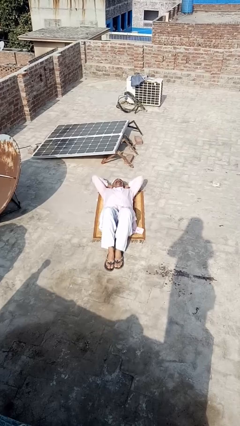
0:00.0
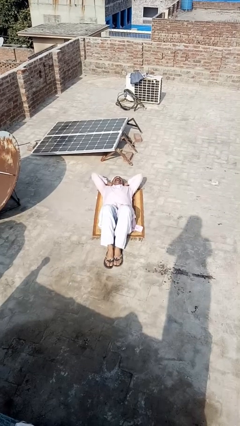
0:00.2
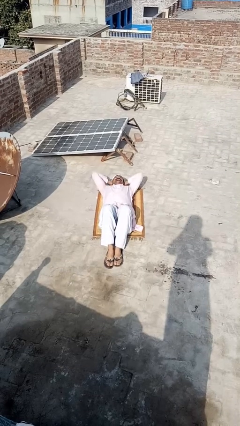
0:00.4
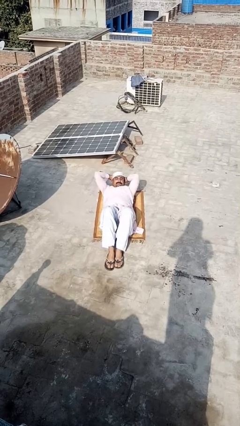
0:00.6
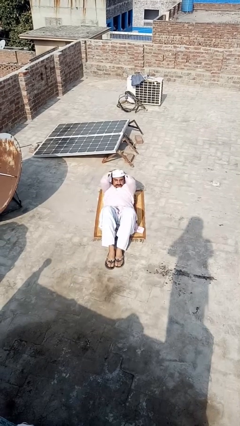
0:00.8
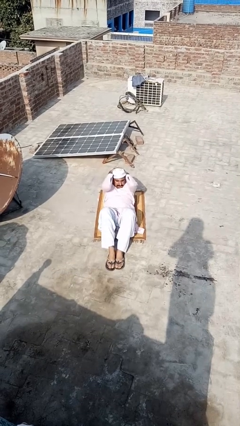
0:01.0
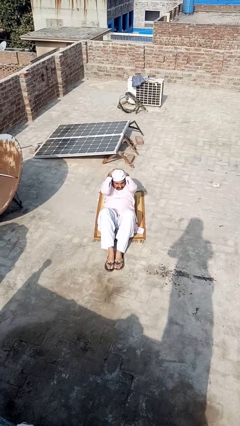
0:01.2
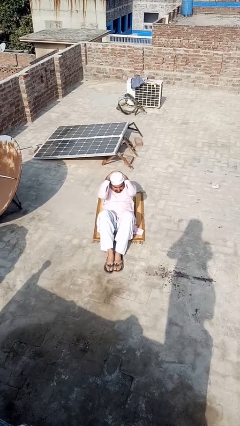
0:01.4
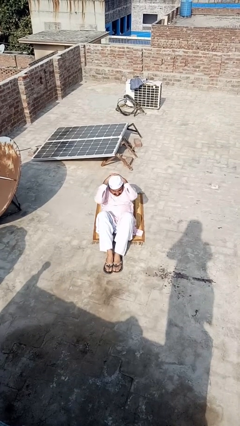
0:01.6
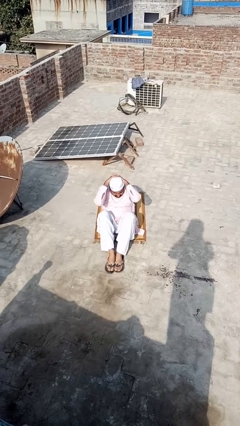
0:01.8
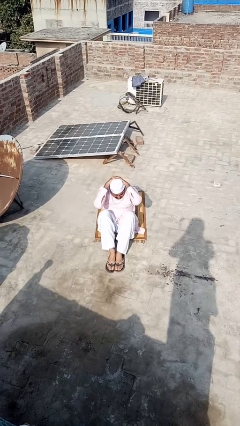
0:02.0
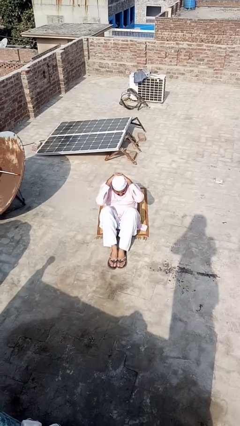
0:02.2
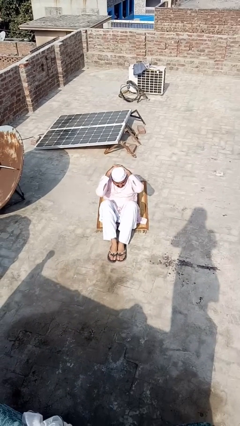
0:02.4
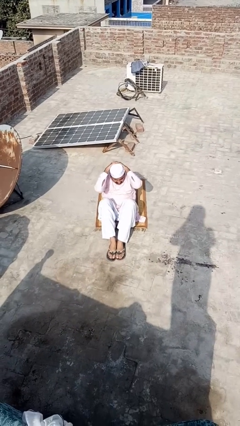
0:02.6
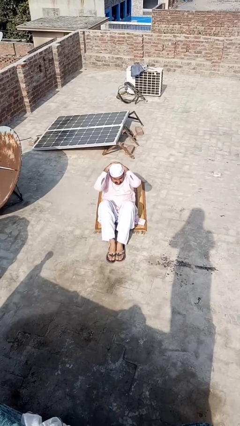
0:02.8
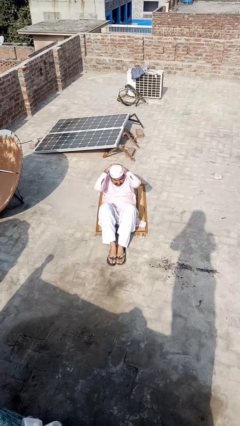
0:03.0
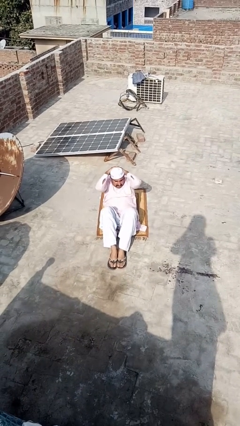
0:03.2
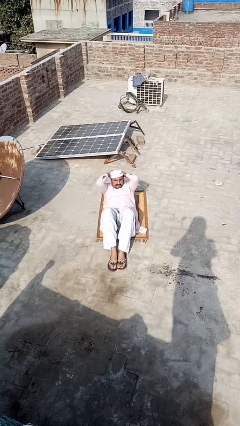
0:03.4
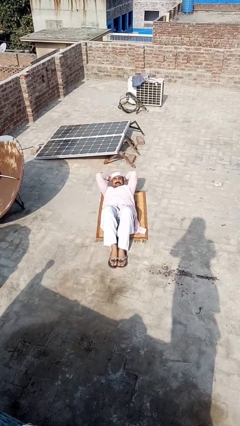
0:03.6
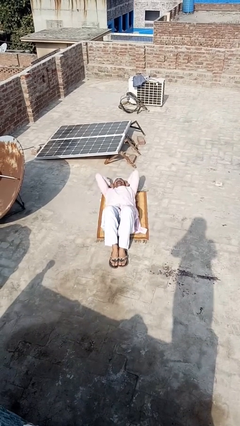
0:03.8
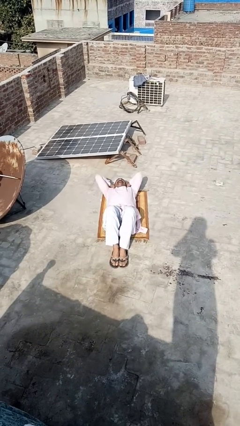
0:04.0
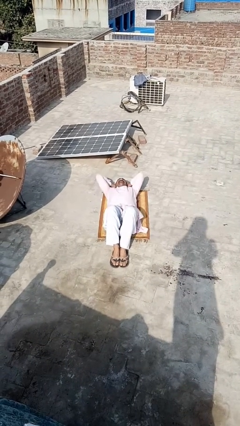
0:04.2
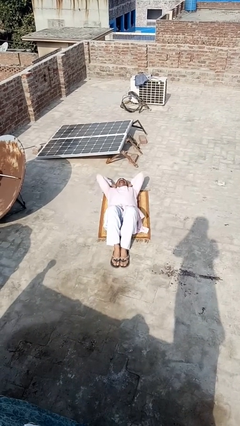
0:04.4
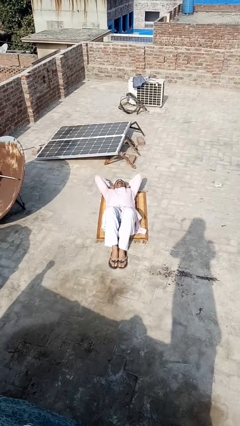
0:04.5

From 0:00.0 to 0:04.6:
person exercises with situp

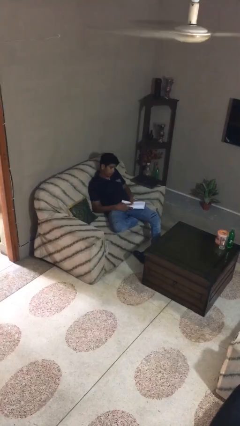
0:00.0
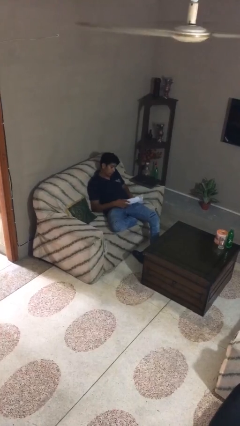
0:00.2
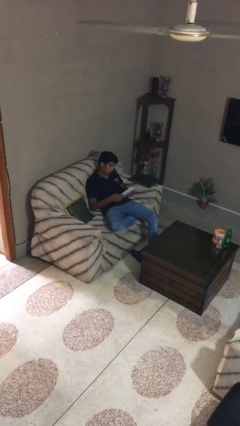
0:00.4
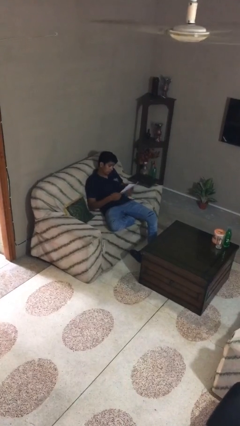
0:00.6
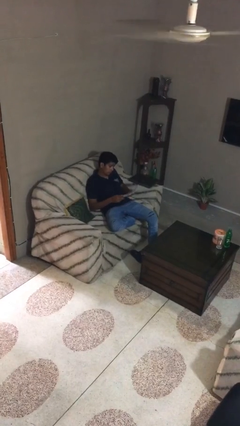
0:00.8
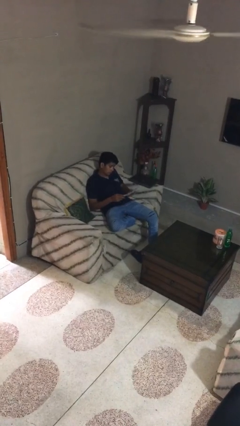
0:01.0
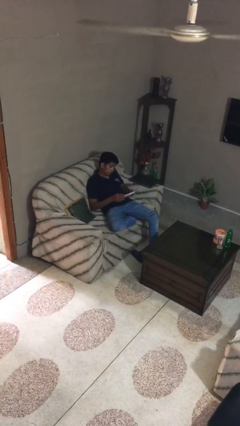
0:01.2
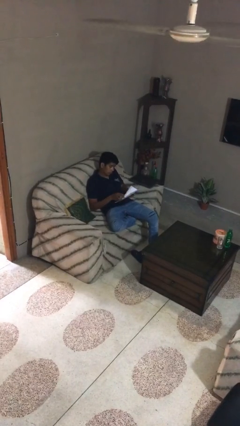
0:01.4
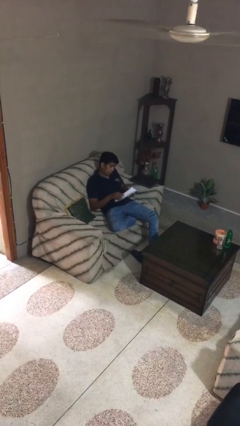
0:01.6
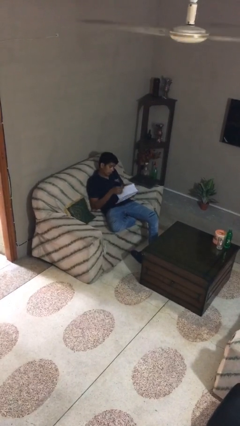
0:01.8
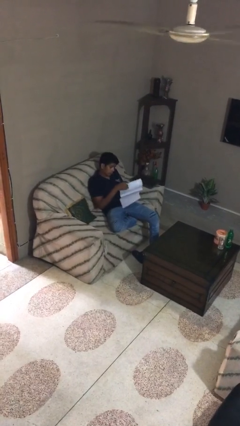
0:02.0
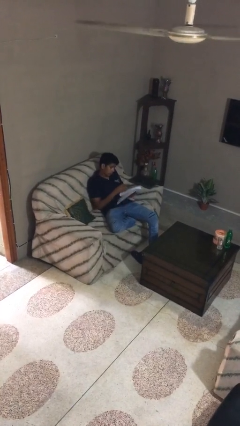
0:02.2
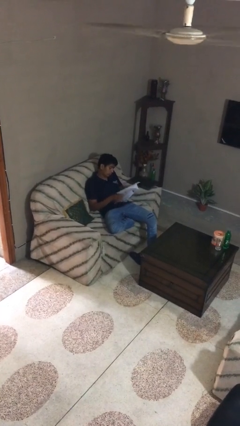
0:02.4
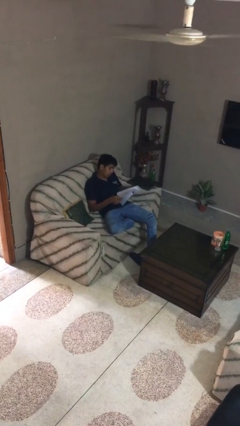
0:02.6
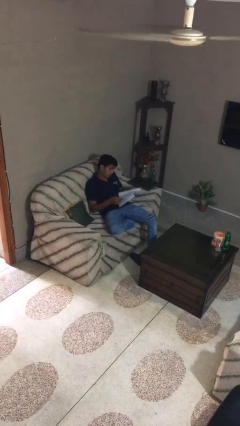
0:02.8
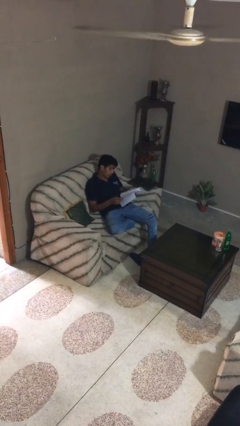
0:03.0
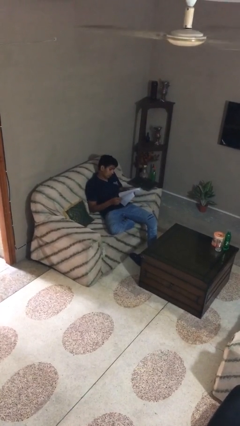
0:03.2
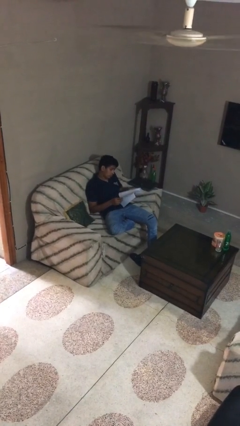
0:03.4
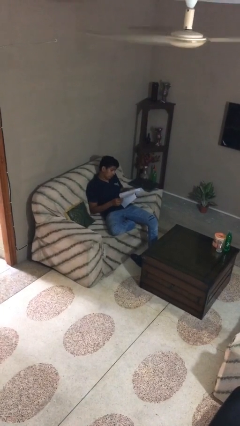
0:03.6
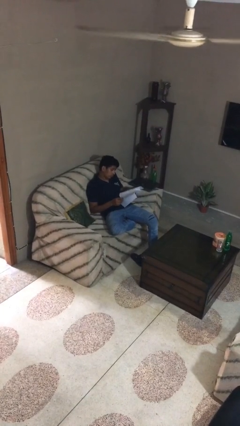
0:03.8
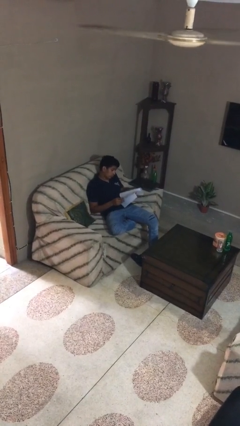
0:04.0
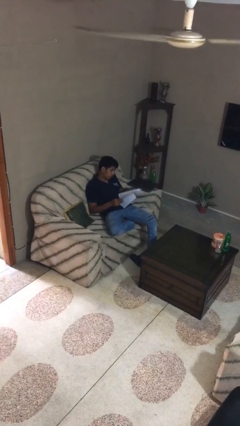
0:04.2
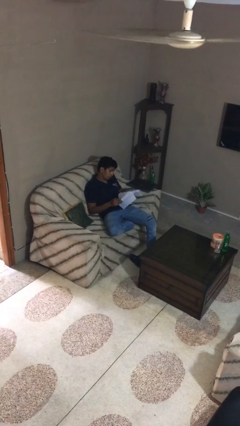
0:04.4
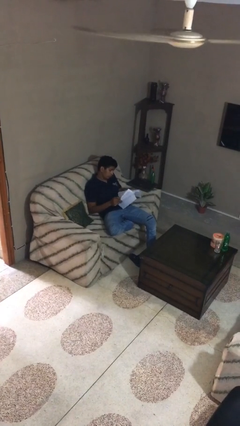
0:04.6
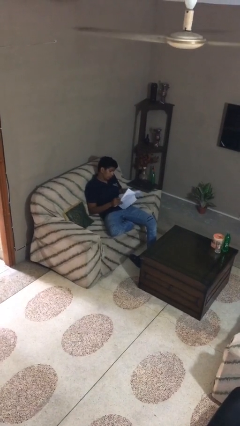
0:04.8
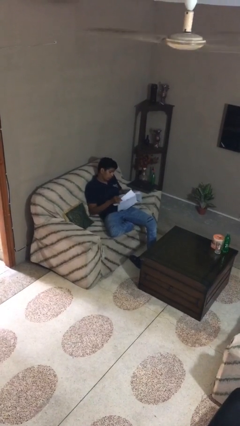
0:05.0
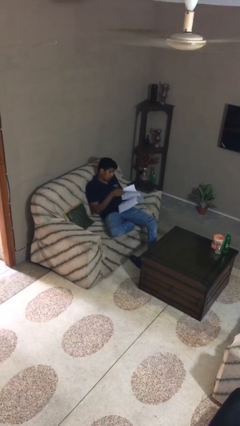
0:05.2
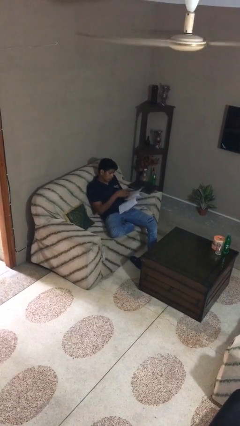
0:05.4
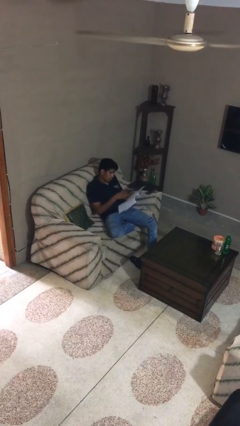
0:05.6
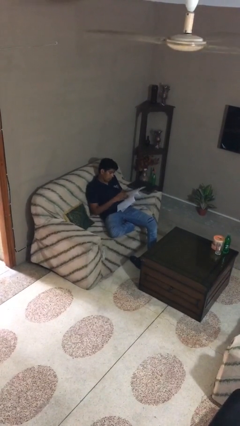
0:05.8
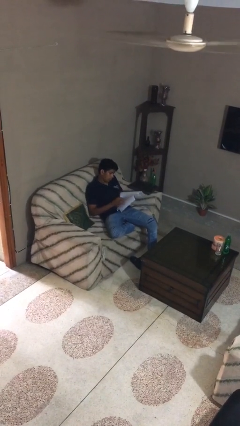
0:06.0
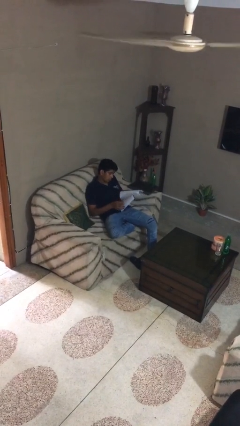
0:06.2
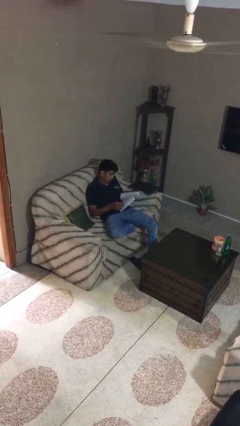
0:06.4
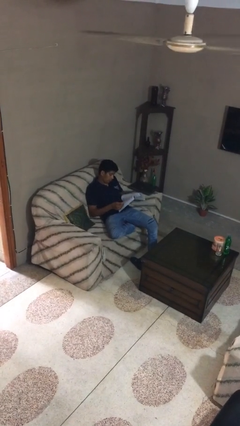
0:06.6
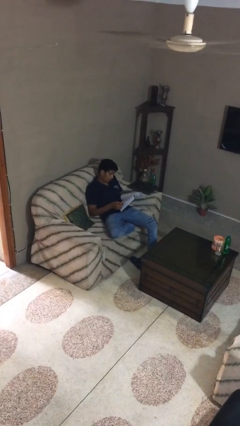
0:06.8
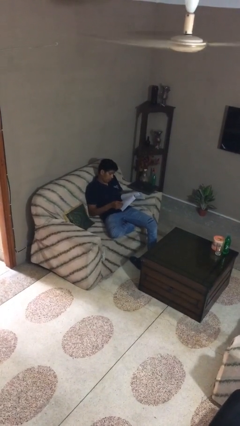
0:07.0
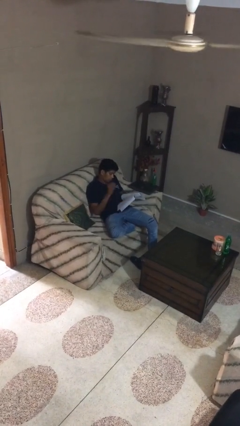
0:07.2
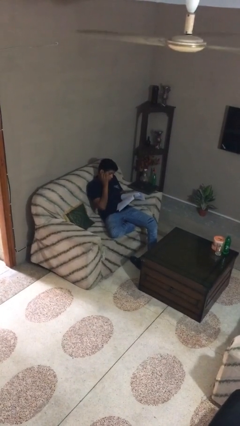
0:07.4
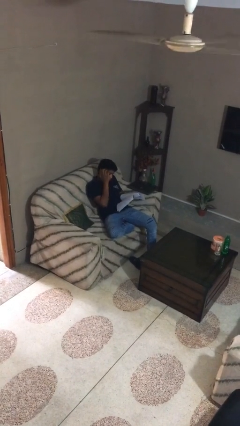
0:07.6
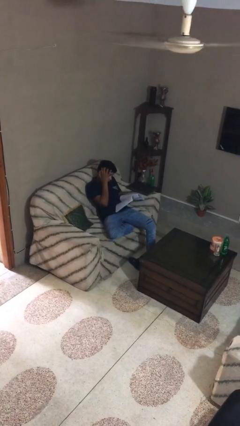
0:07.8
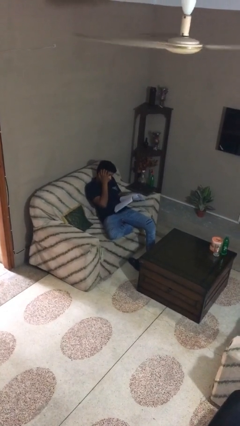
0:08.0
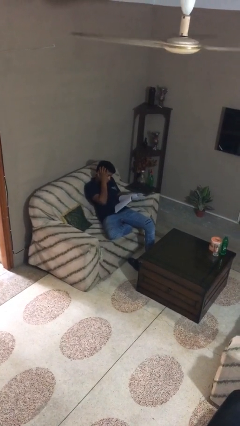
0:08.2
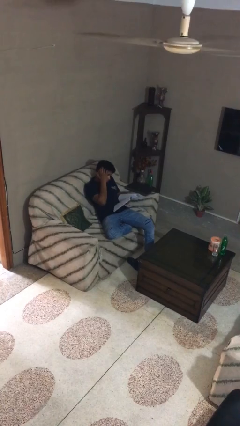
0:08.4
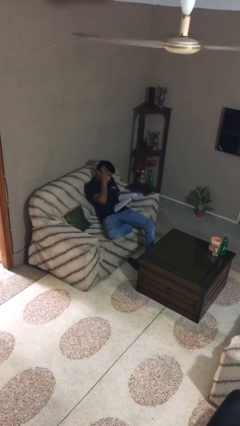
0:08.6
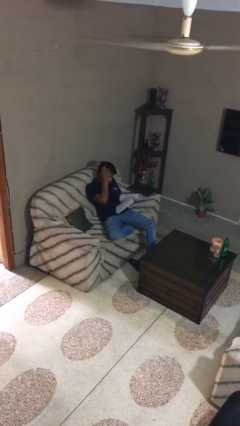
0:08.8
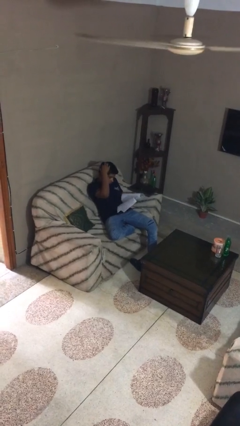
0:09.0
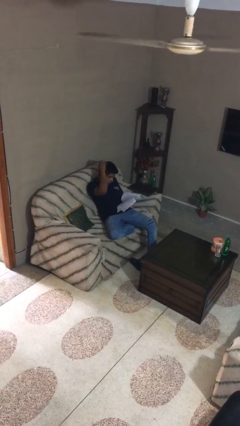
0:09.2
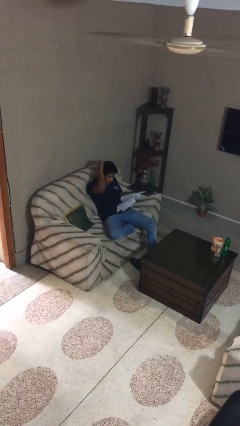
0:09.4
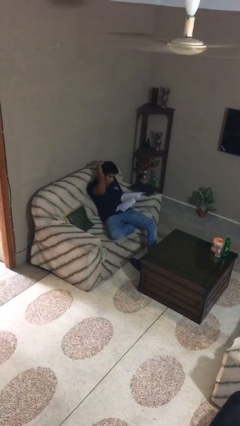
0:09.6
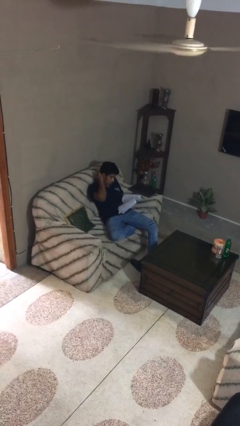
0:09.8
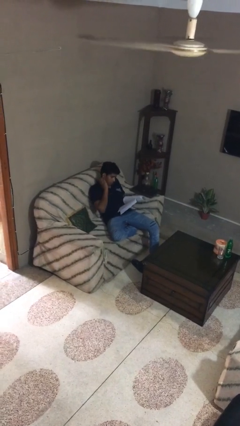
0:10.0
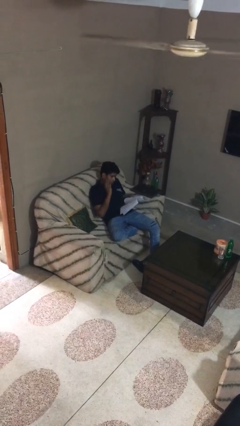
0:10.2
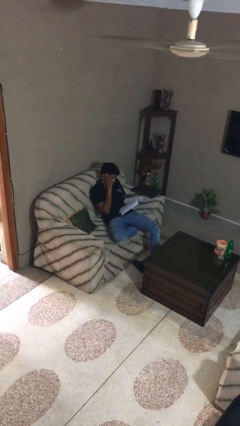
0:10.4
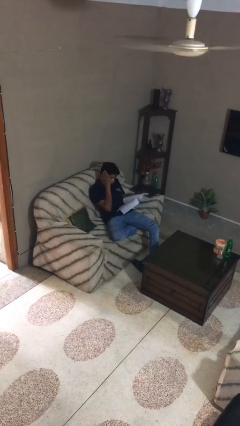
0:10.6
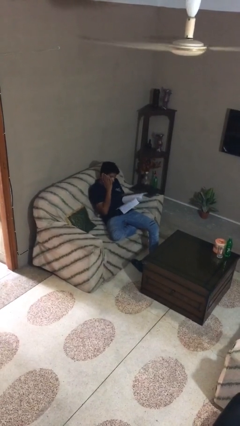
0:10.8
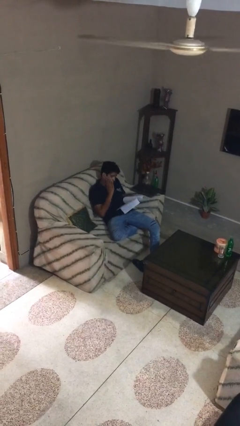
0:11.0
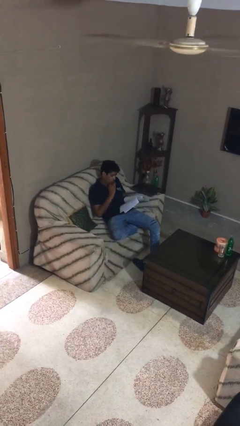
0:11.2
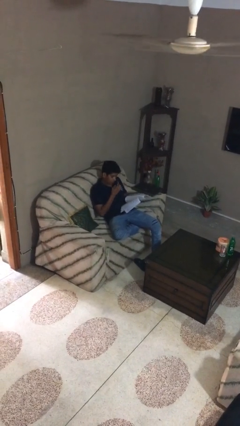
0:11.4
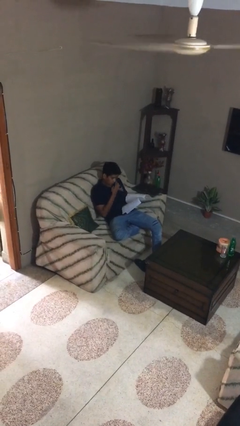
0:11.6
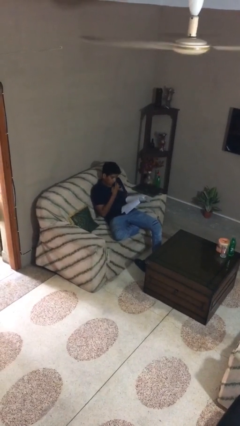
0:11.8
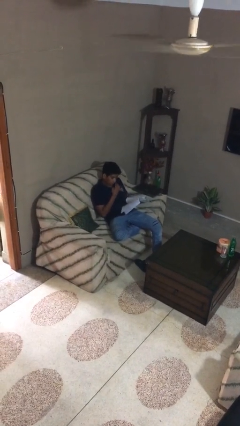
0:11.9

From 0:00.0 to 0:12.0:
person reads document

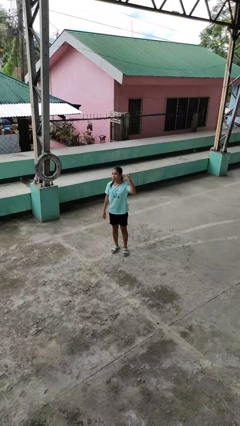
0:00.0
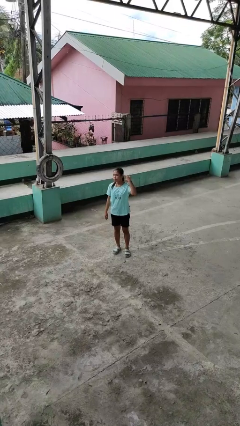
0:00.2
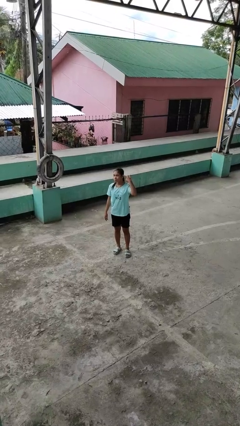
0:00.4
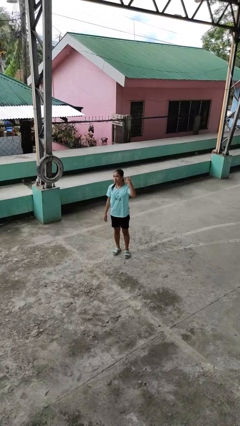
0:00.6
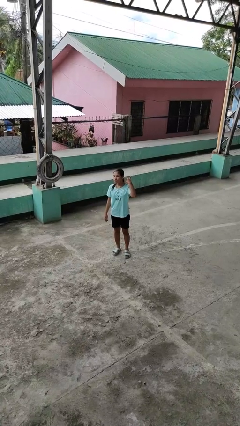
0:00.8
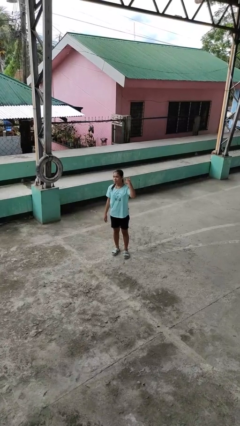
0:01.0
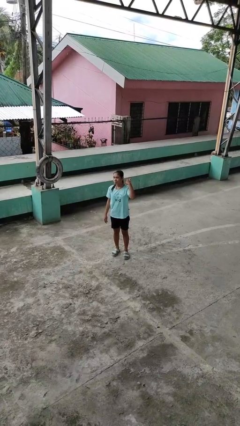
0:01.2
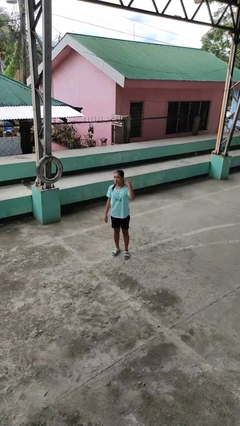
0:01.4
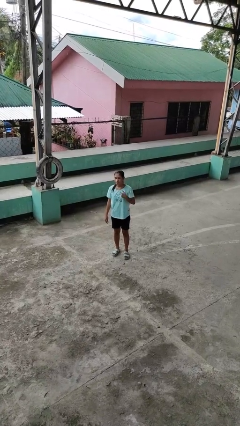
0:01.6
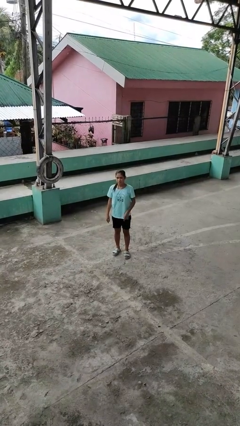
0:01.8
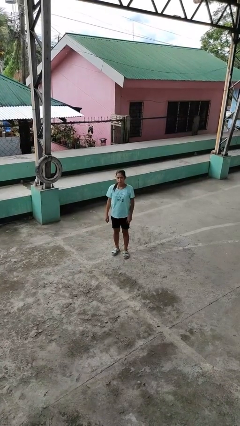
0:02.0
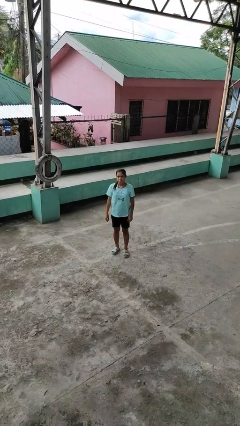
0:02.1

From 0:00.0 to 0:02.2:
person gestures listen closely
